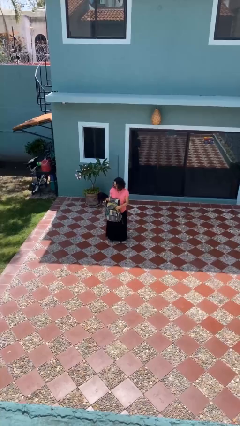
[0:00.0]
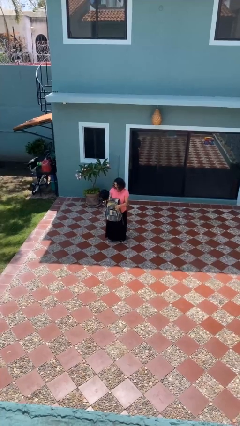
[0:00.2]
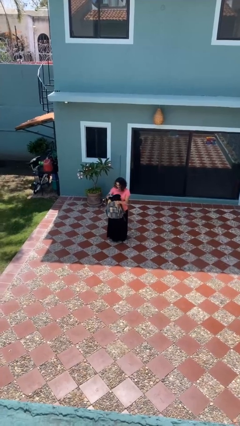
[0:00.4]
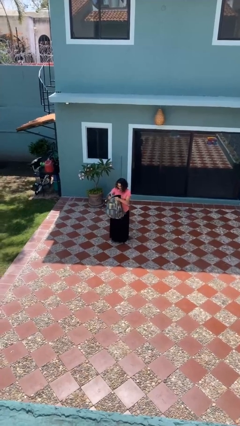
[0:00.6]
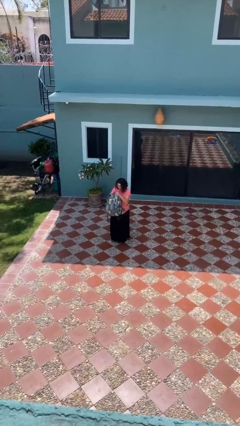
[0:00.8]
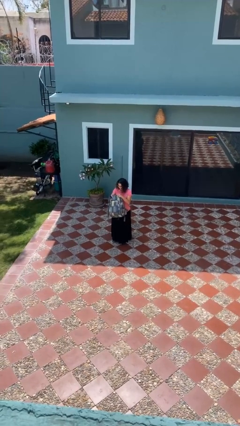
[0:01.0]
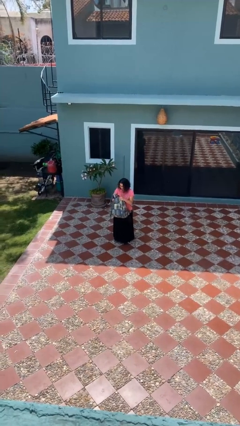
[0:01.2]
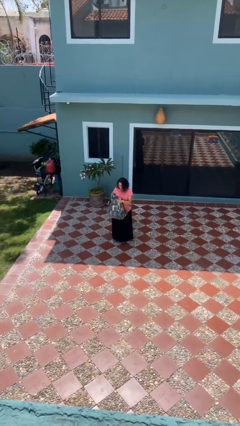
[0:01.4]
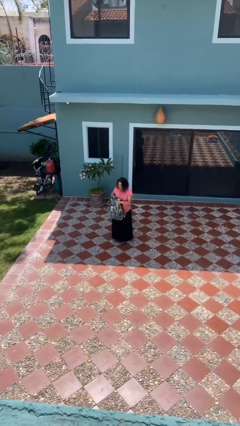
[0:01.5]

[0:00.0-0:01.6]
person puts object into backpack

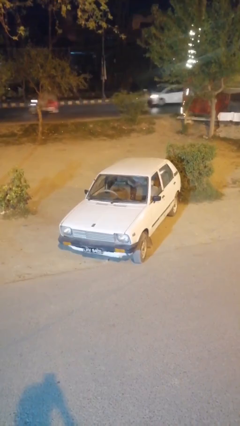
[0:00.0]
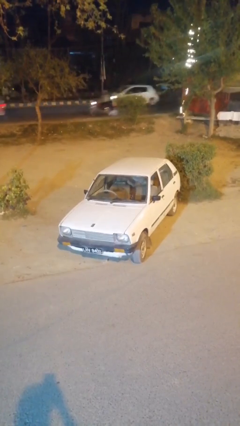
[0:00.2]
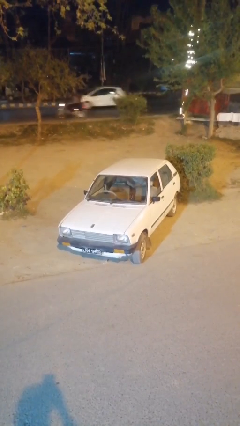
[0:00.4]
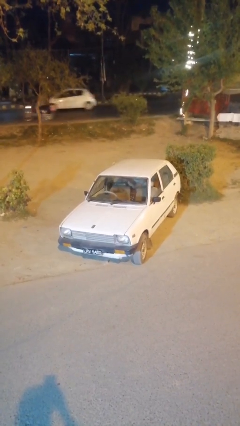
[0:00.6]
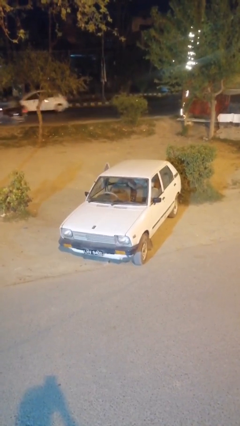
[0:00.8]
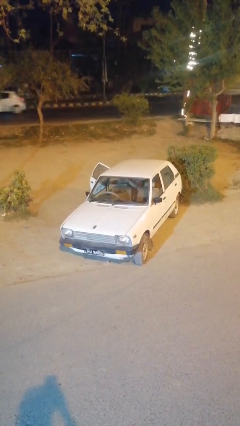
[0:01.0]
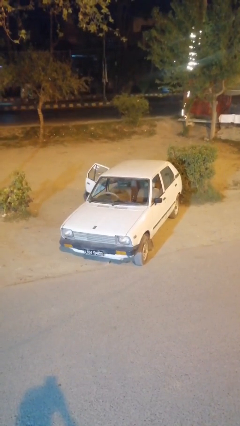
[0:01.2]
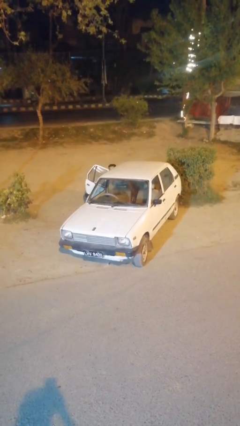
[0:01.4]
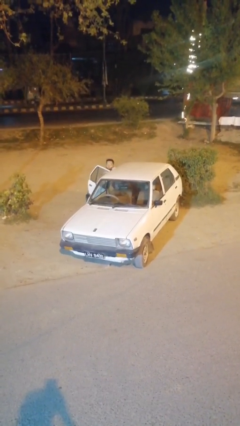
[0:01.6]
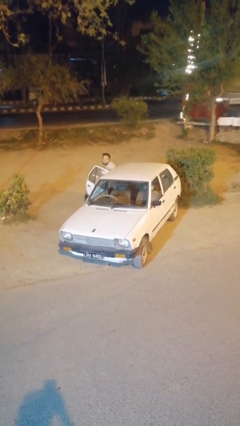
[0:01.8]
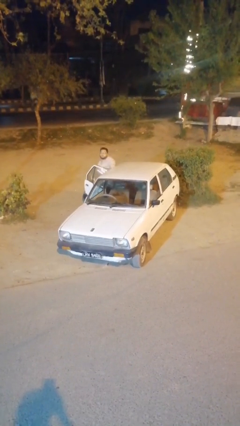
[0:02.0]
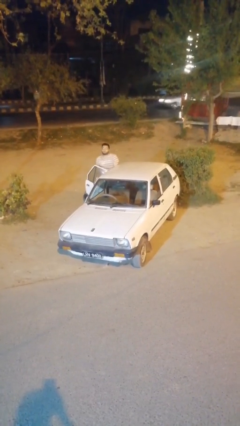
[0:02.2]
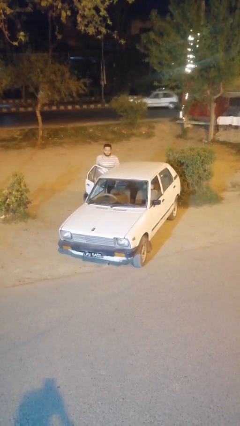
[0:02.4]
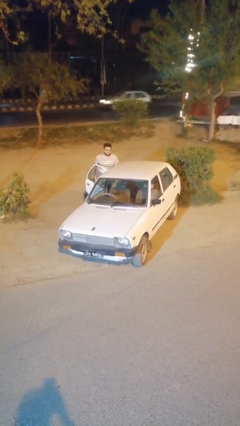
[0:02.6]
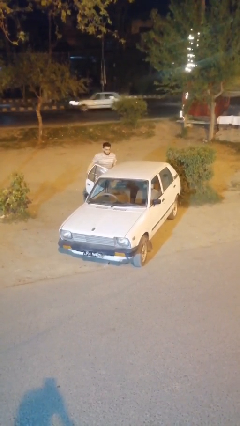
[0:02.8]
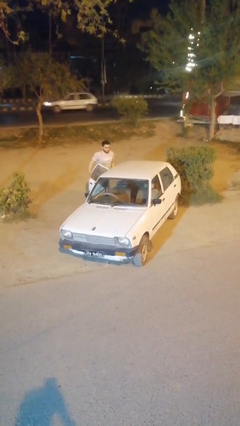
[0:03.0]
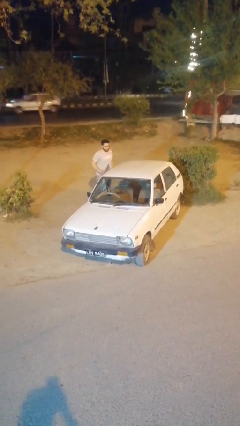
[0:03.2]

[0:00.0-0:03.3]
car drops off person

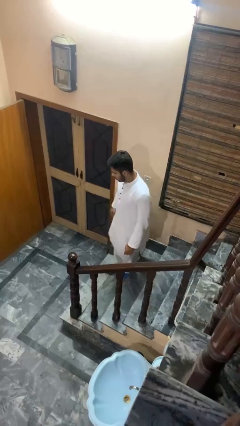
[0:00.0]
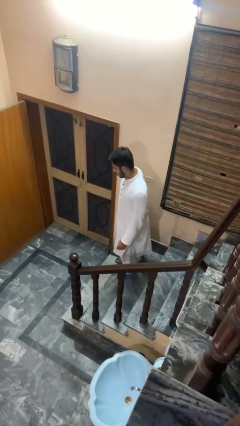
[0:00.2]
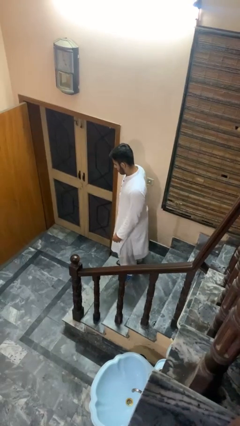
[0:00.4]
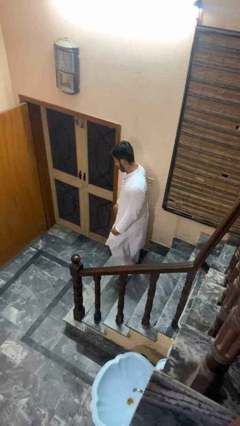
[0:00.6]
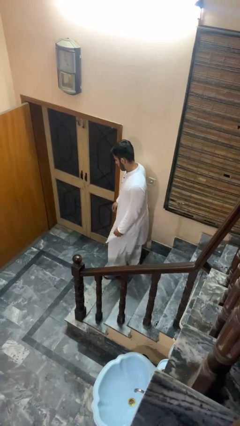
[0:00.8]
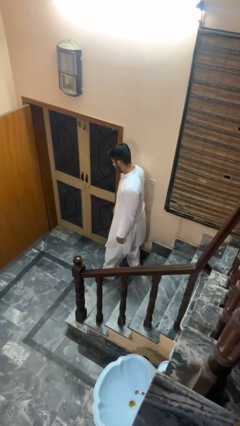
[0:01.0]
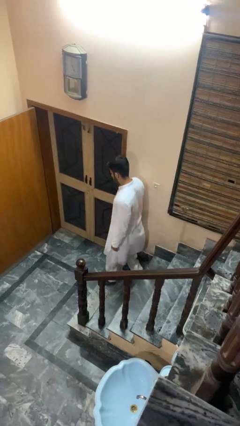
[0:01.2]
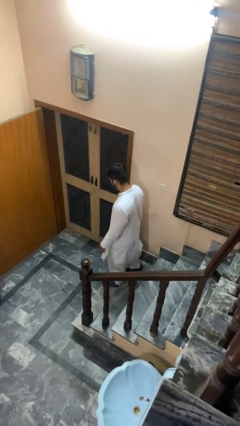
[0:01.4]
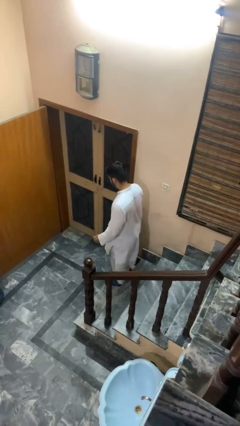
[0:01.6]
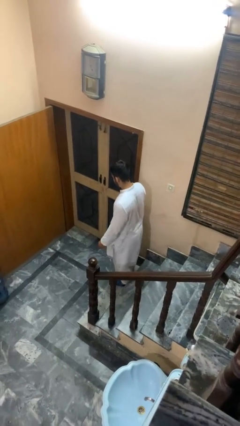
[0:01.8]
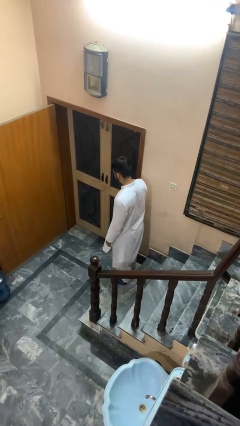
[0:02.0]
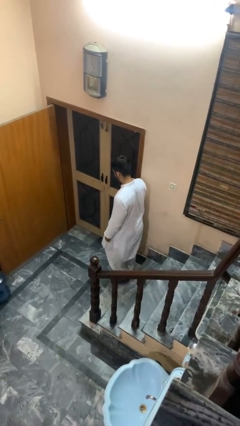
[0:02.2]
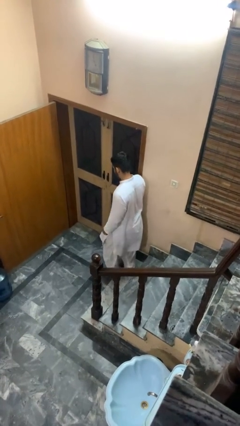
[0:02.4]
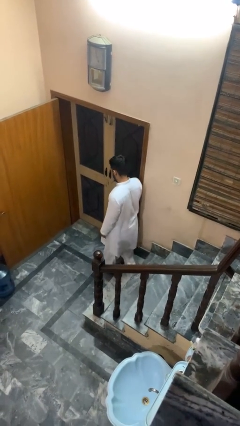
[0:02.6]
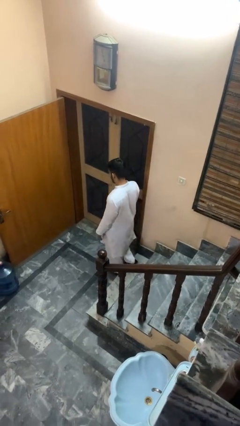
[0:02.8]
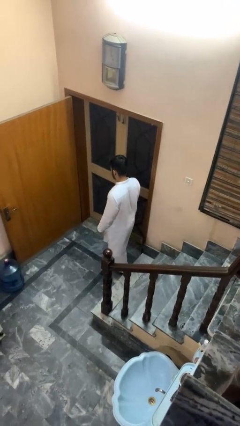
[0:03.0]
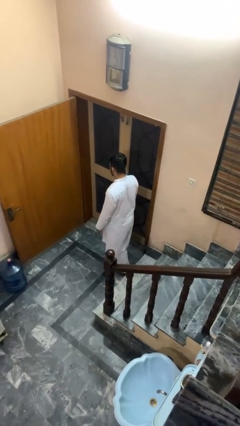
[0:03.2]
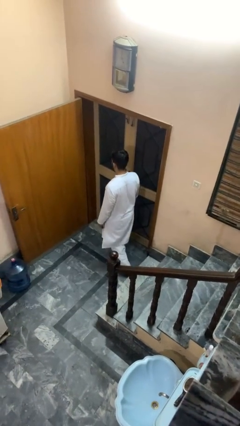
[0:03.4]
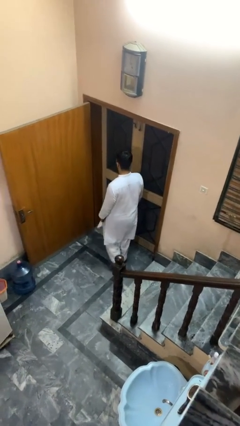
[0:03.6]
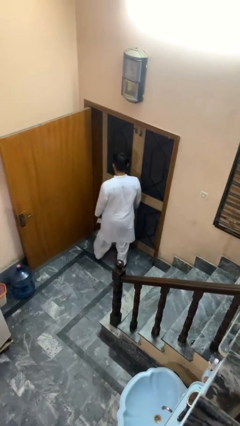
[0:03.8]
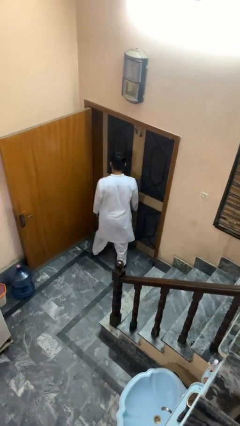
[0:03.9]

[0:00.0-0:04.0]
person climbs down stairs

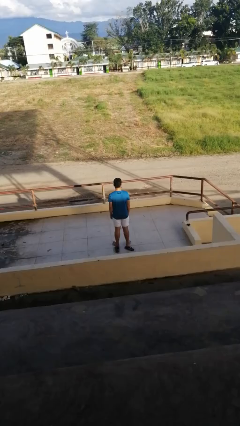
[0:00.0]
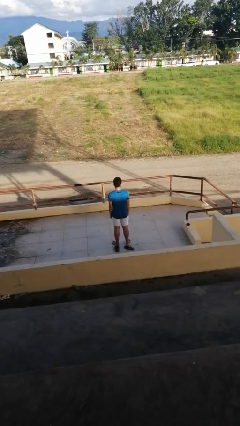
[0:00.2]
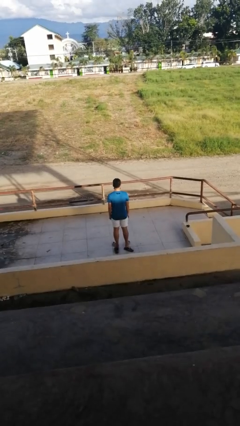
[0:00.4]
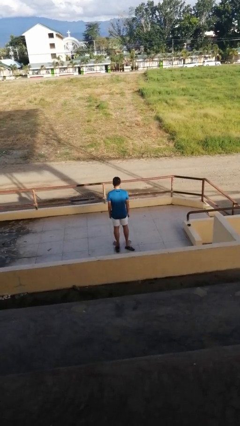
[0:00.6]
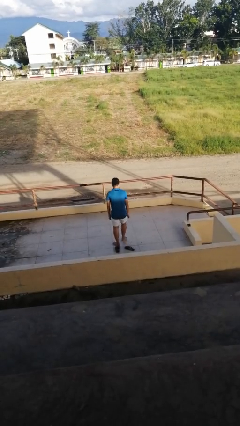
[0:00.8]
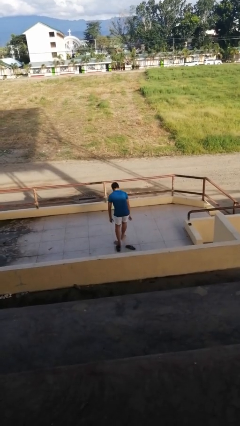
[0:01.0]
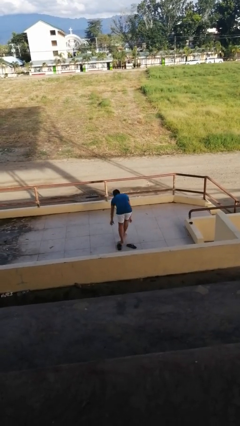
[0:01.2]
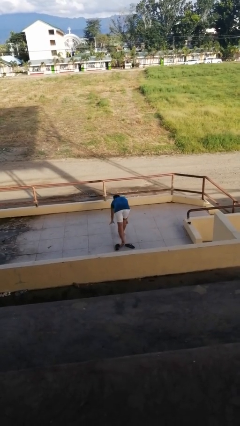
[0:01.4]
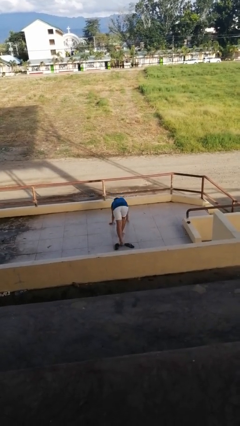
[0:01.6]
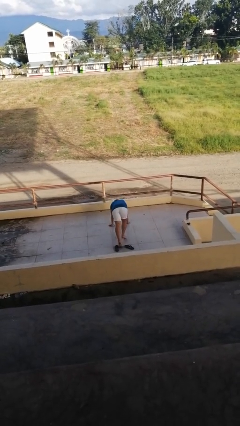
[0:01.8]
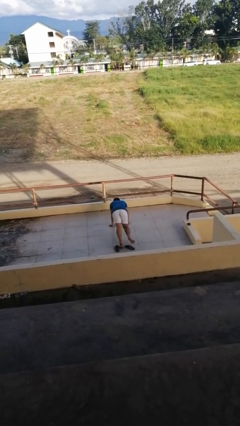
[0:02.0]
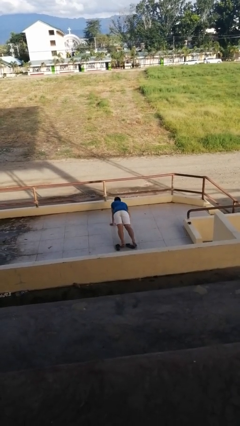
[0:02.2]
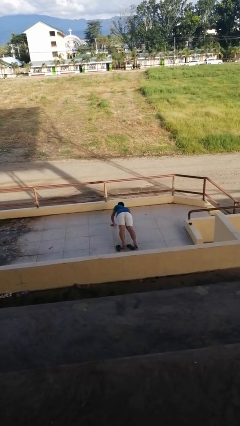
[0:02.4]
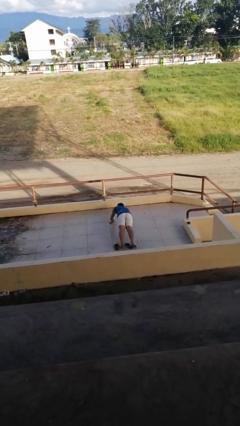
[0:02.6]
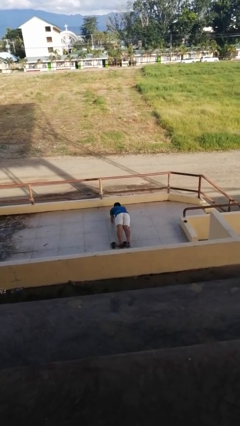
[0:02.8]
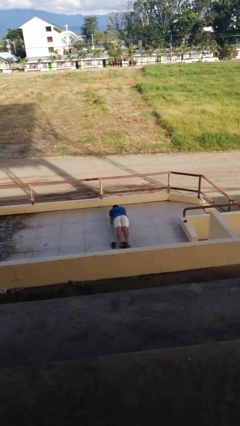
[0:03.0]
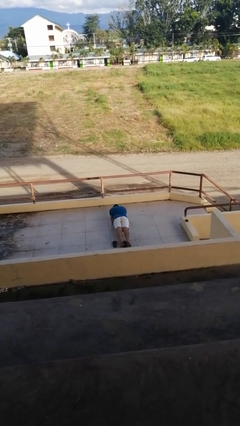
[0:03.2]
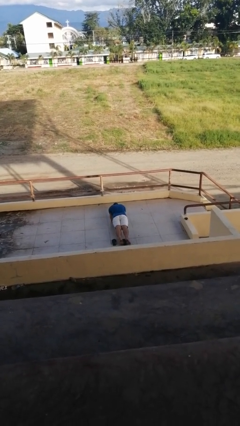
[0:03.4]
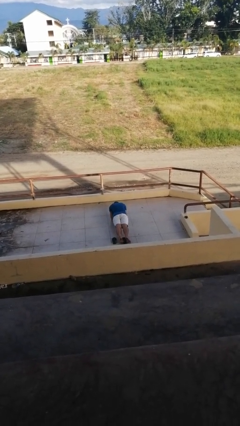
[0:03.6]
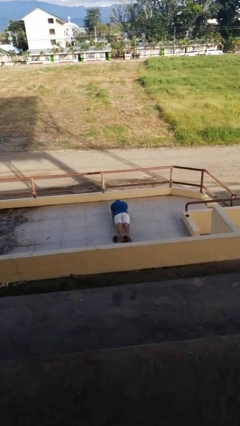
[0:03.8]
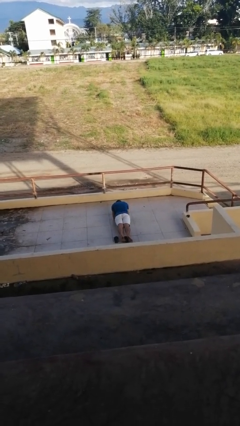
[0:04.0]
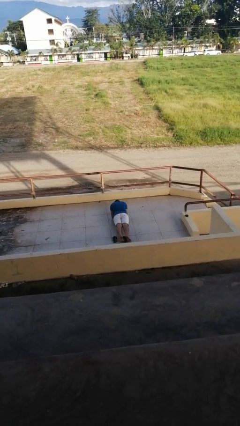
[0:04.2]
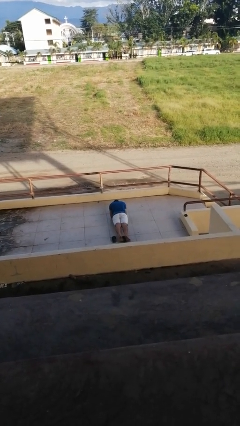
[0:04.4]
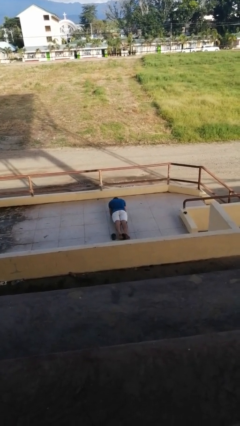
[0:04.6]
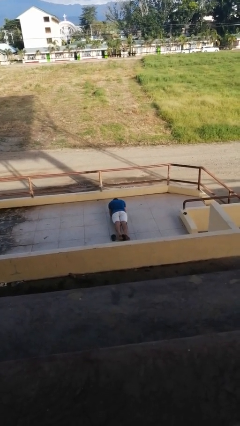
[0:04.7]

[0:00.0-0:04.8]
person exercises with plank

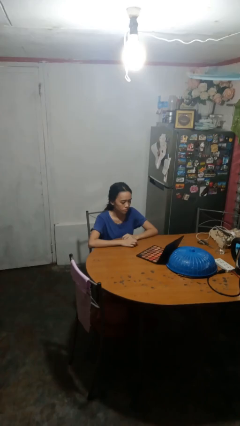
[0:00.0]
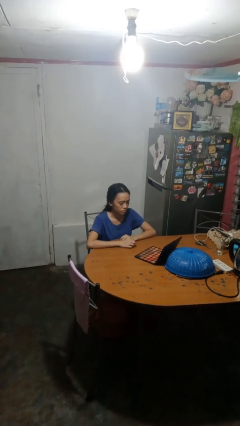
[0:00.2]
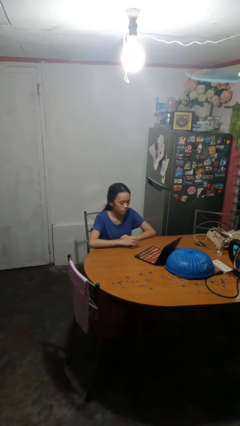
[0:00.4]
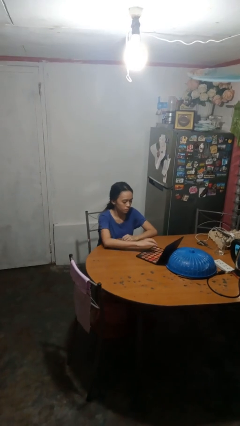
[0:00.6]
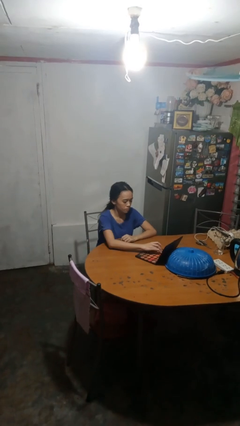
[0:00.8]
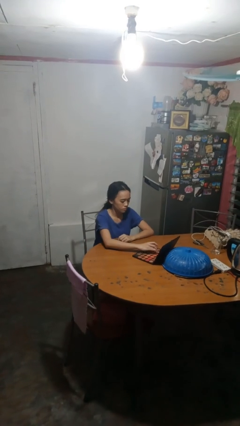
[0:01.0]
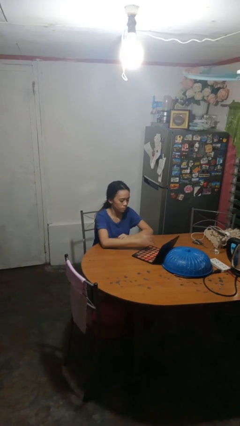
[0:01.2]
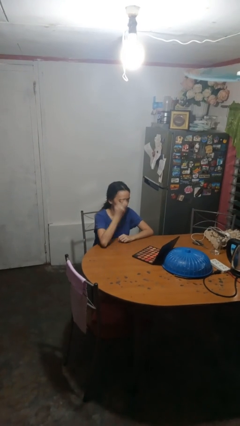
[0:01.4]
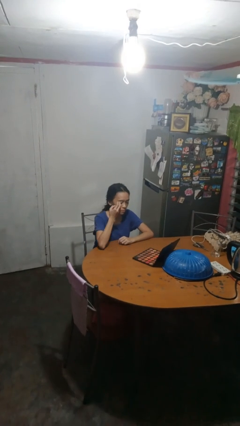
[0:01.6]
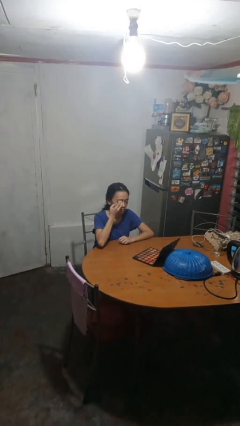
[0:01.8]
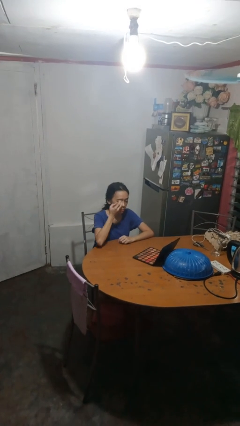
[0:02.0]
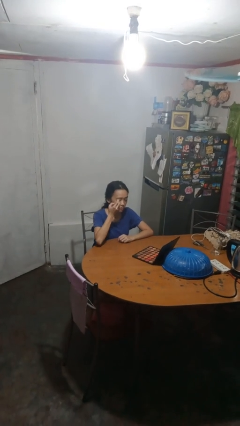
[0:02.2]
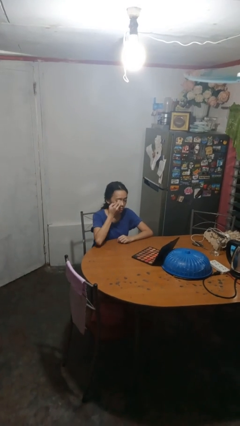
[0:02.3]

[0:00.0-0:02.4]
person applies eye makeup

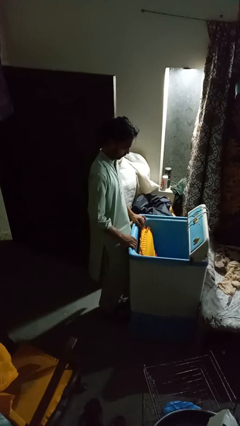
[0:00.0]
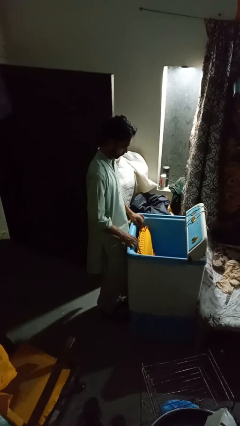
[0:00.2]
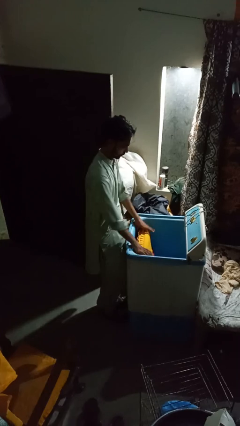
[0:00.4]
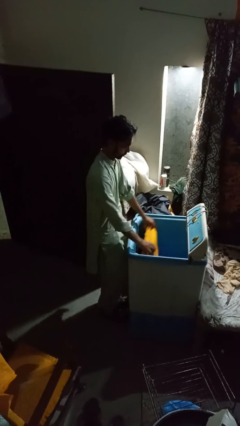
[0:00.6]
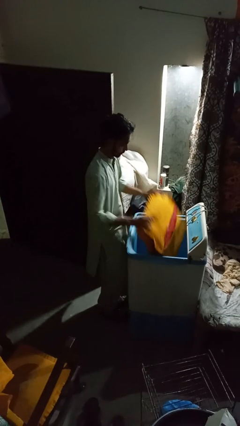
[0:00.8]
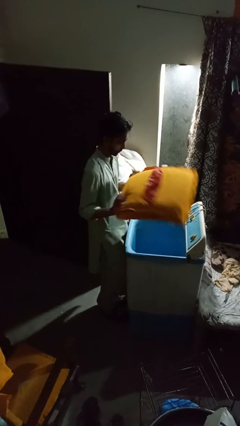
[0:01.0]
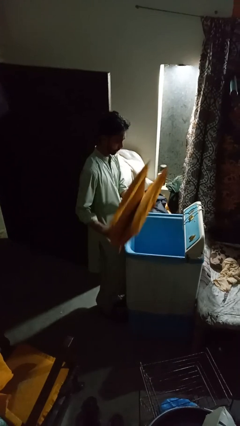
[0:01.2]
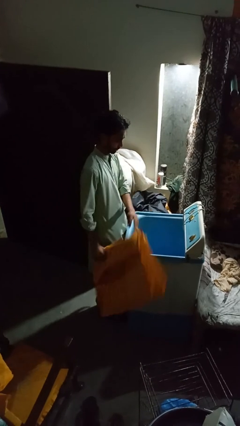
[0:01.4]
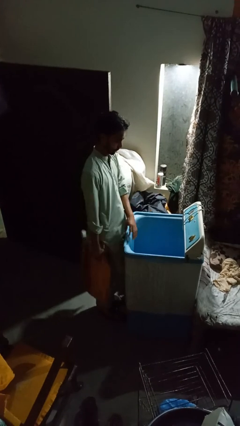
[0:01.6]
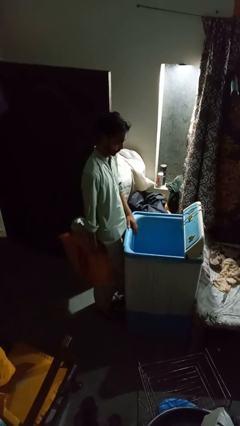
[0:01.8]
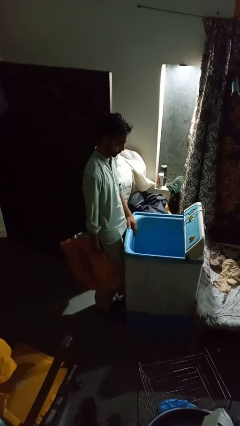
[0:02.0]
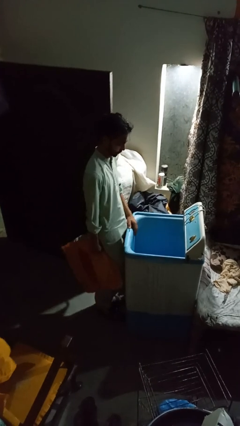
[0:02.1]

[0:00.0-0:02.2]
person unloads clotheswasher
